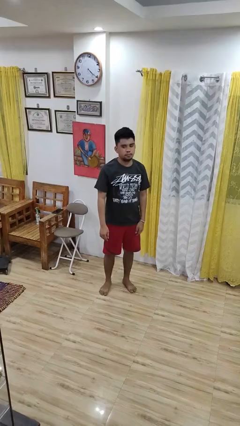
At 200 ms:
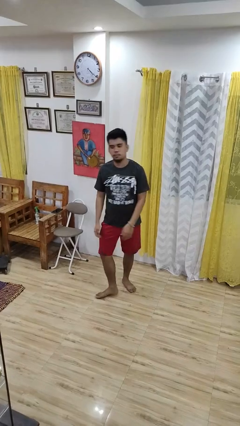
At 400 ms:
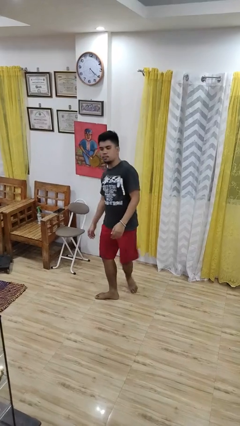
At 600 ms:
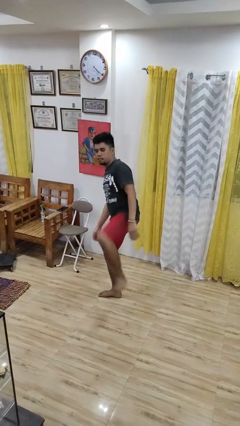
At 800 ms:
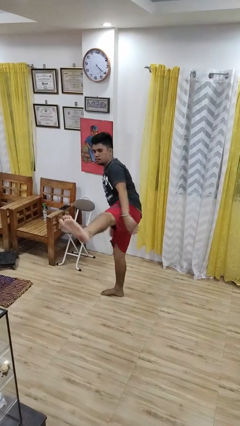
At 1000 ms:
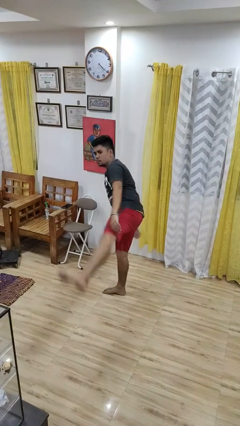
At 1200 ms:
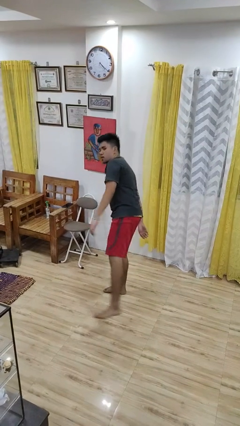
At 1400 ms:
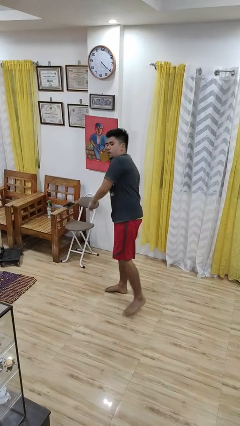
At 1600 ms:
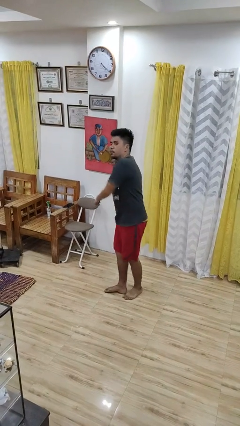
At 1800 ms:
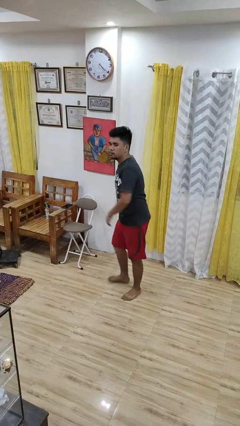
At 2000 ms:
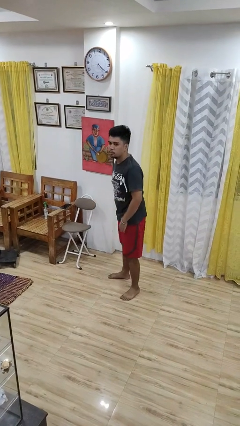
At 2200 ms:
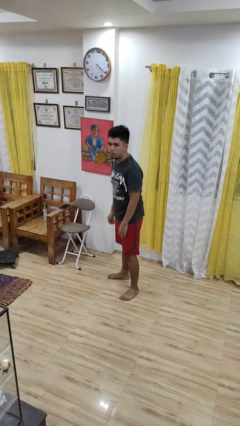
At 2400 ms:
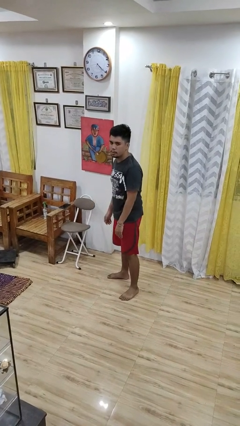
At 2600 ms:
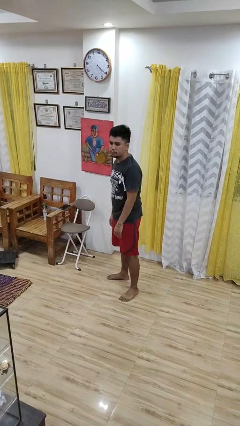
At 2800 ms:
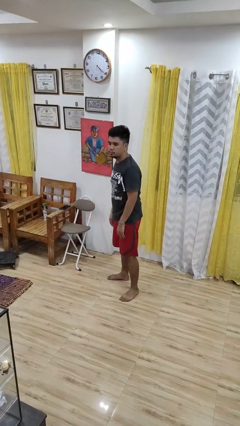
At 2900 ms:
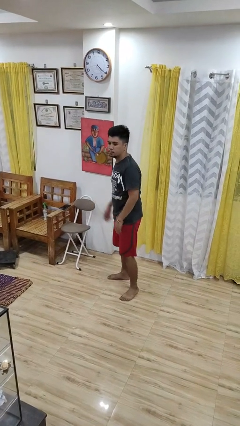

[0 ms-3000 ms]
person karate kicks

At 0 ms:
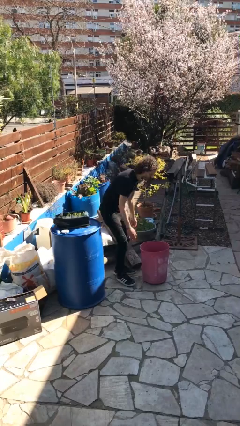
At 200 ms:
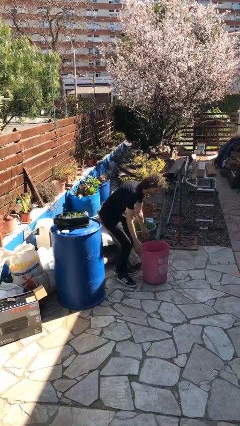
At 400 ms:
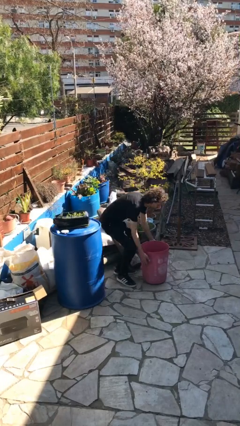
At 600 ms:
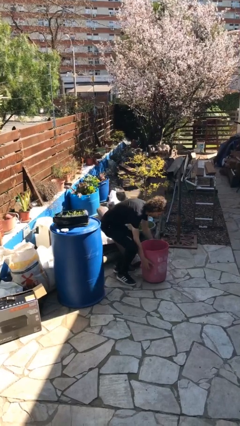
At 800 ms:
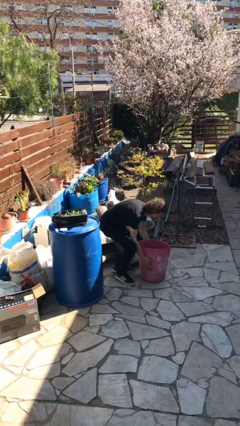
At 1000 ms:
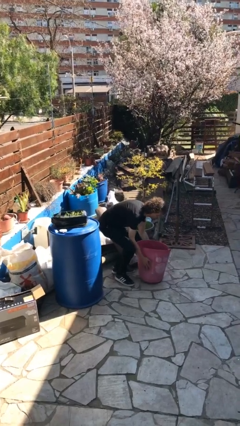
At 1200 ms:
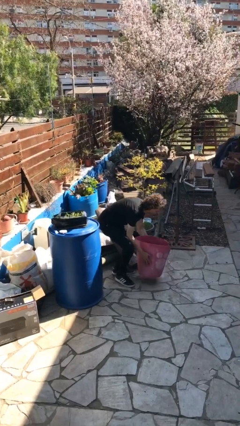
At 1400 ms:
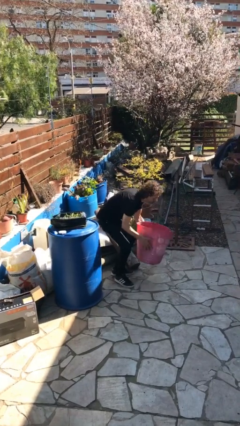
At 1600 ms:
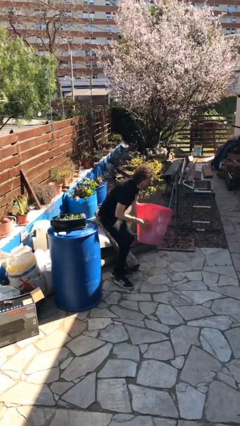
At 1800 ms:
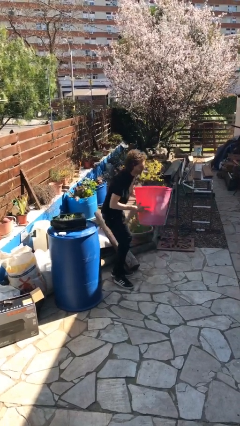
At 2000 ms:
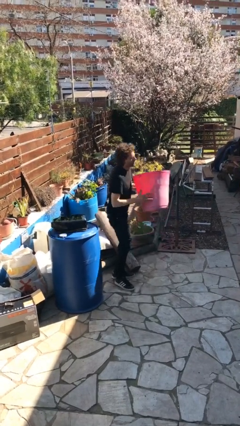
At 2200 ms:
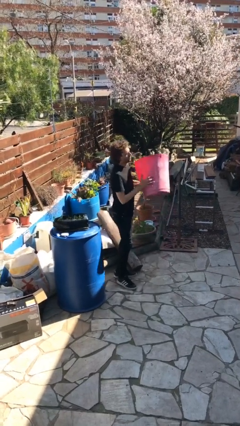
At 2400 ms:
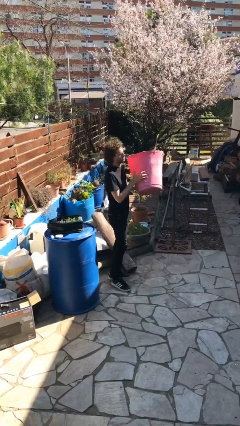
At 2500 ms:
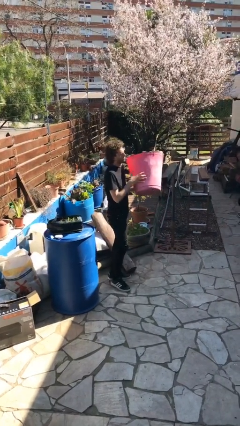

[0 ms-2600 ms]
person picks up object from floor

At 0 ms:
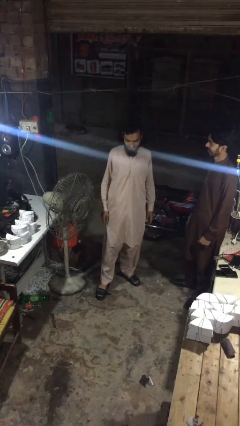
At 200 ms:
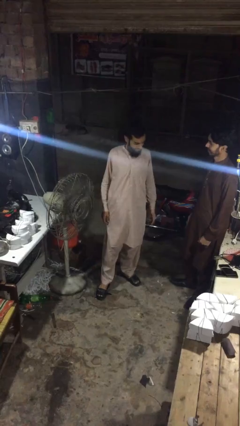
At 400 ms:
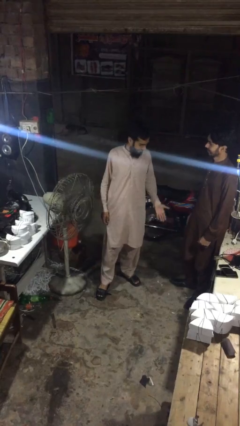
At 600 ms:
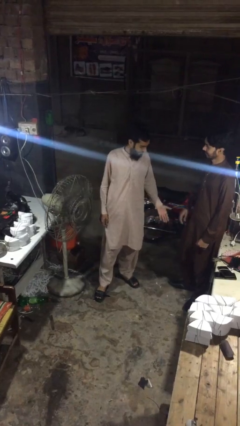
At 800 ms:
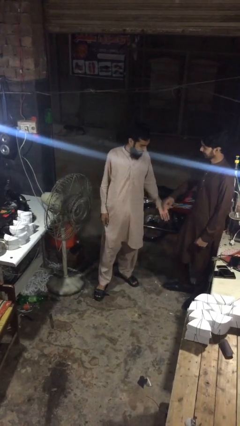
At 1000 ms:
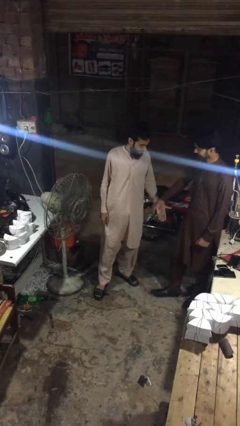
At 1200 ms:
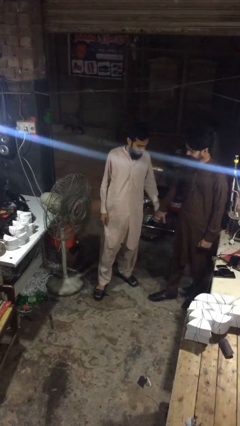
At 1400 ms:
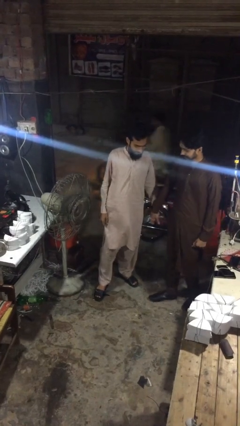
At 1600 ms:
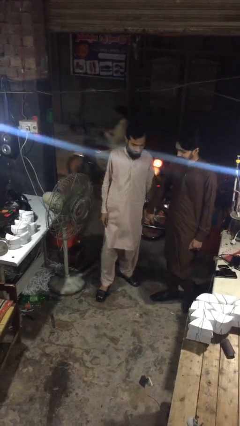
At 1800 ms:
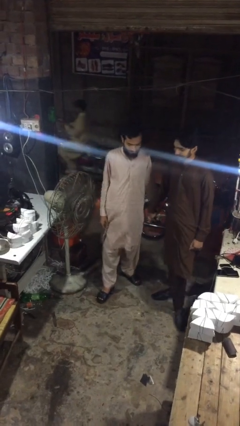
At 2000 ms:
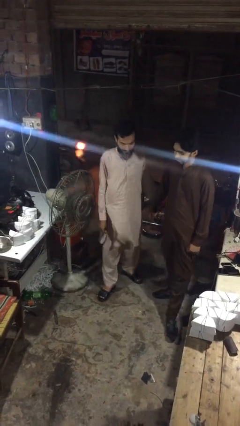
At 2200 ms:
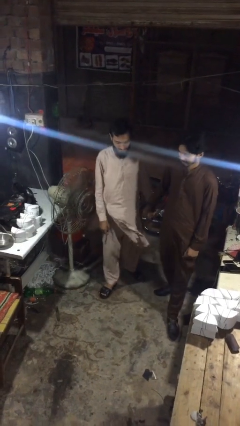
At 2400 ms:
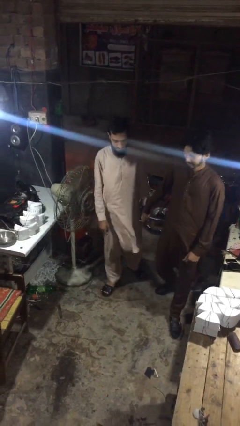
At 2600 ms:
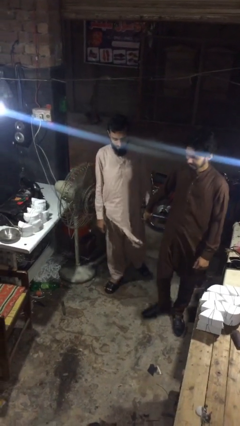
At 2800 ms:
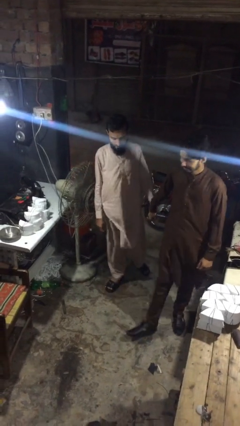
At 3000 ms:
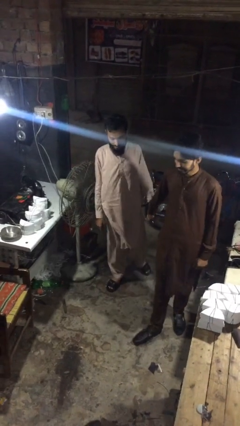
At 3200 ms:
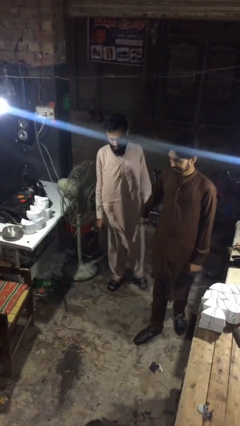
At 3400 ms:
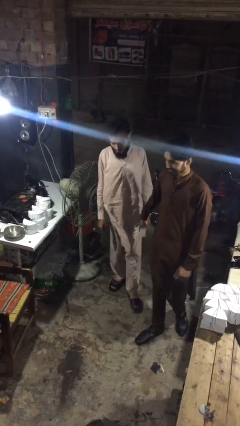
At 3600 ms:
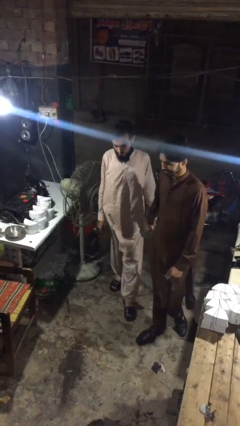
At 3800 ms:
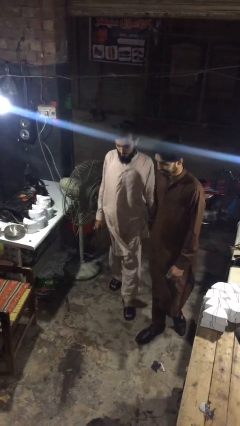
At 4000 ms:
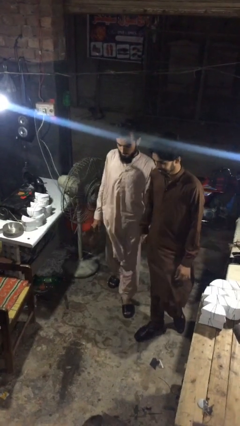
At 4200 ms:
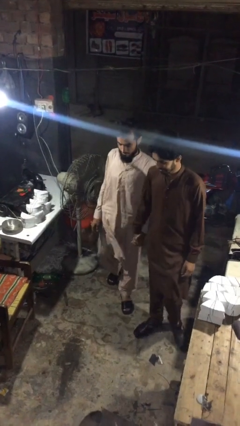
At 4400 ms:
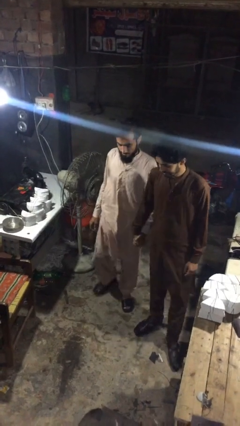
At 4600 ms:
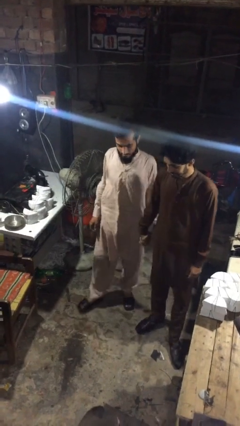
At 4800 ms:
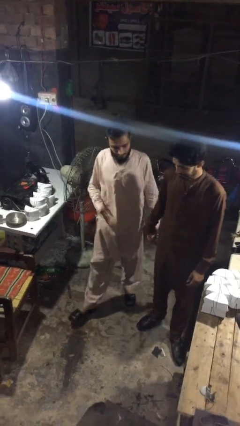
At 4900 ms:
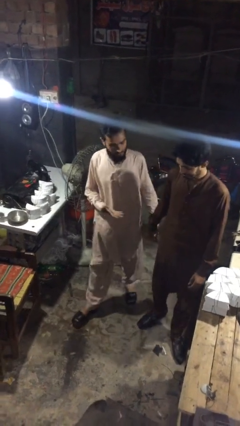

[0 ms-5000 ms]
person holds hand

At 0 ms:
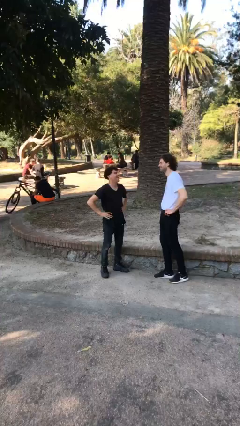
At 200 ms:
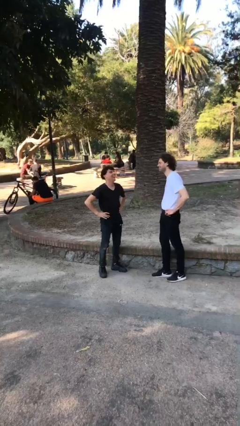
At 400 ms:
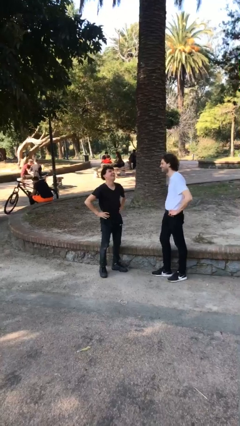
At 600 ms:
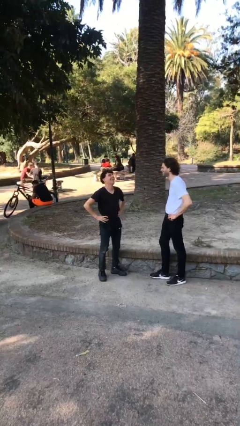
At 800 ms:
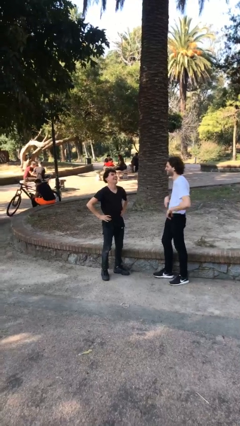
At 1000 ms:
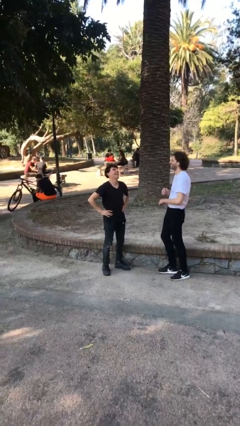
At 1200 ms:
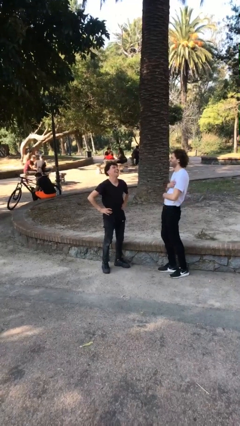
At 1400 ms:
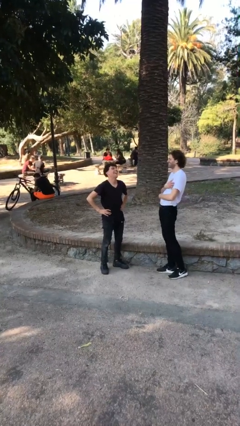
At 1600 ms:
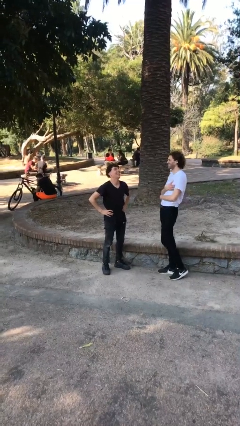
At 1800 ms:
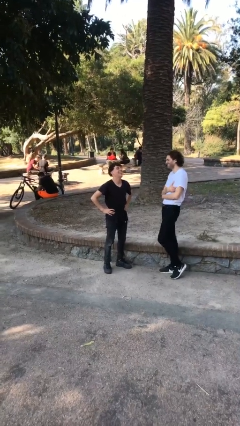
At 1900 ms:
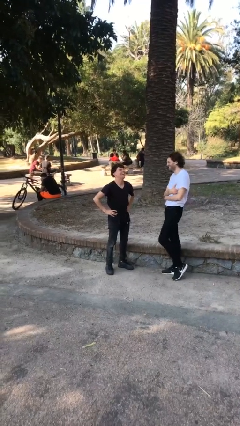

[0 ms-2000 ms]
person laughs with person

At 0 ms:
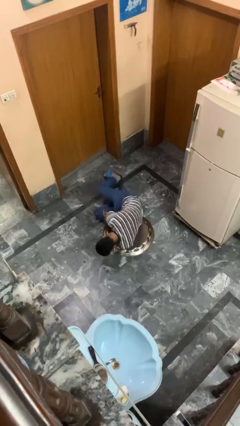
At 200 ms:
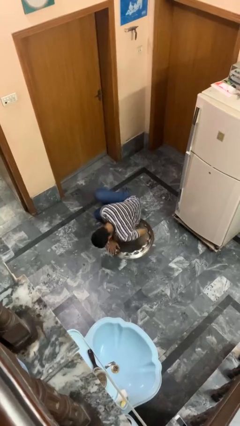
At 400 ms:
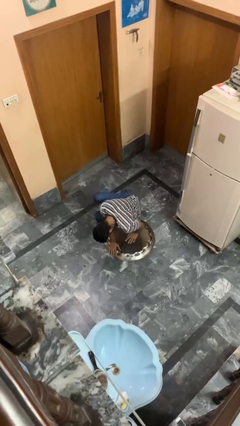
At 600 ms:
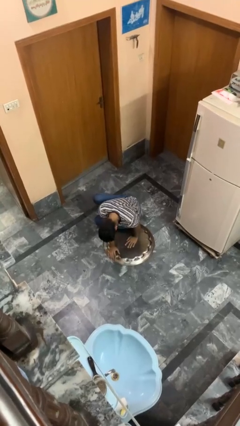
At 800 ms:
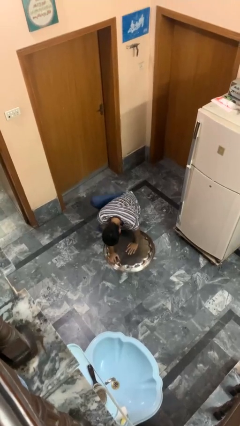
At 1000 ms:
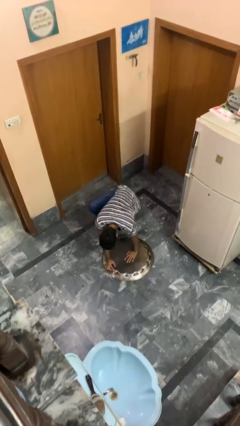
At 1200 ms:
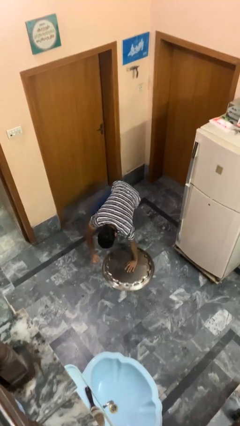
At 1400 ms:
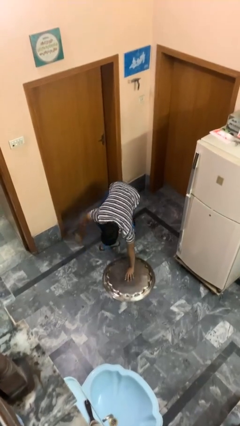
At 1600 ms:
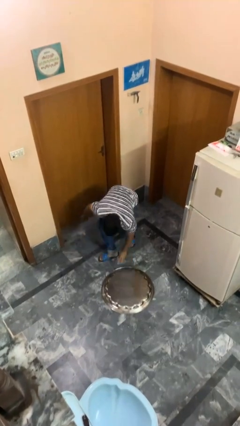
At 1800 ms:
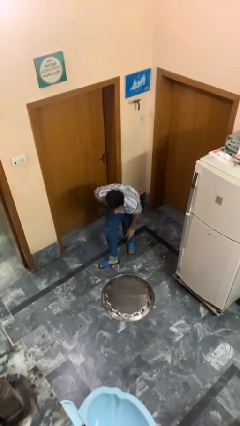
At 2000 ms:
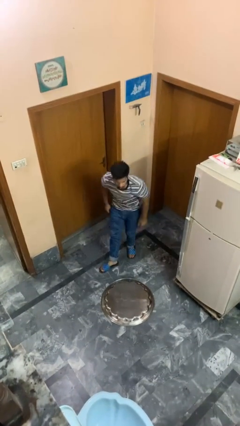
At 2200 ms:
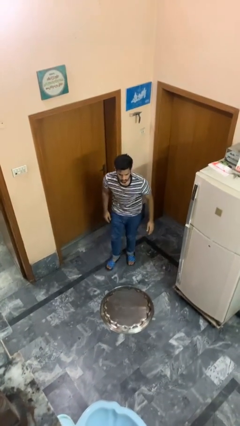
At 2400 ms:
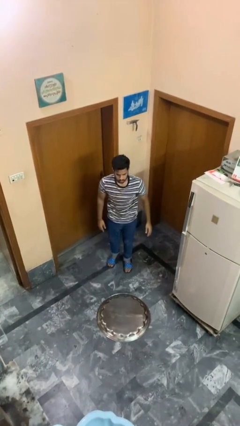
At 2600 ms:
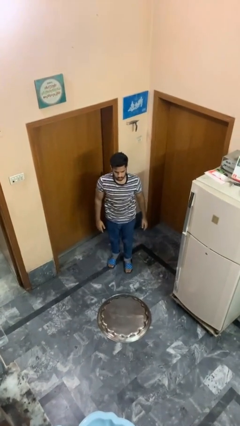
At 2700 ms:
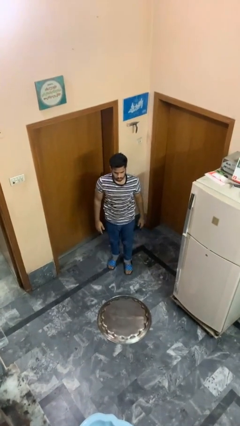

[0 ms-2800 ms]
person stands up from floor

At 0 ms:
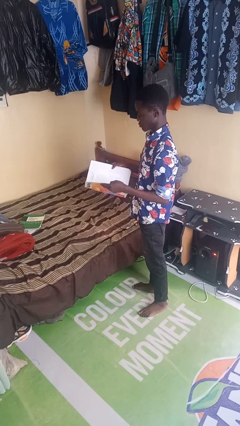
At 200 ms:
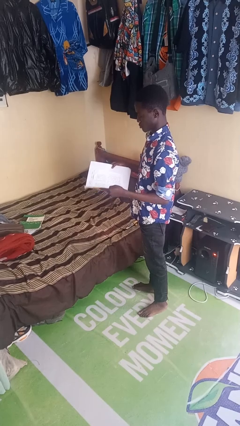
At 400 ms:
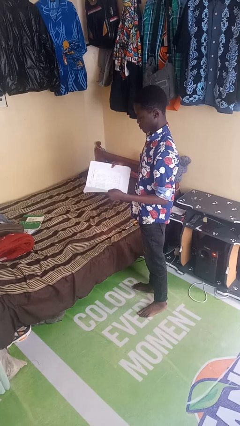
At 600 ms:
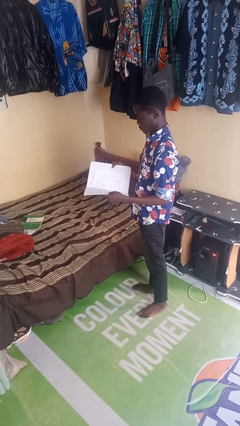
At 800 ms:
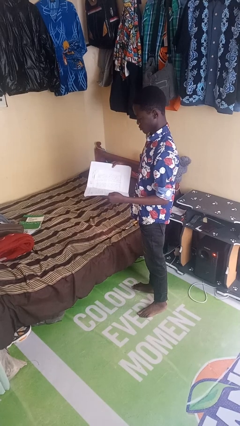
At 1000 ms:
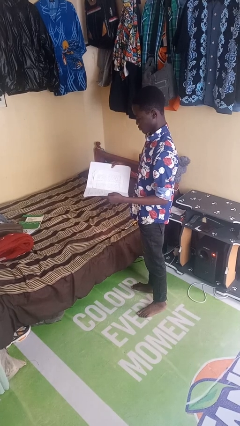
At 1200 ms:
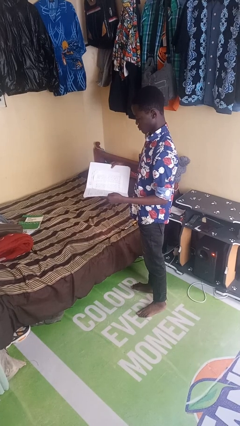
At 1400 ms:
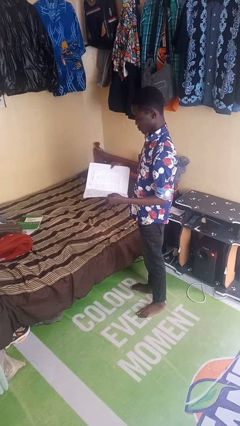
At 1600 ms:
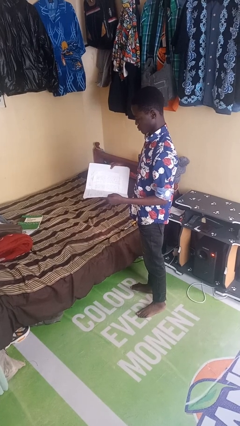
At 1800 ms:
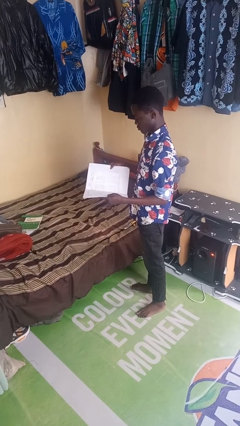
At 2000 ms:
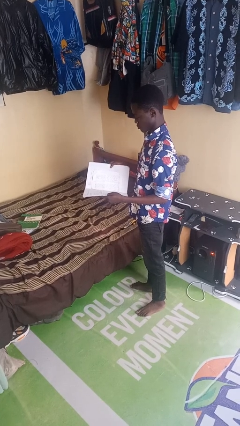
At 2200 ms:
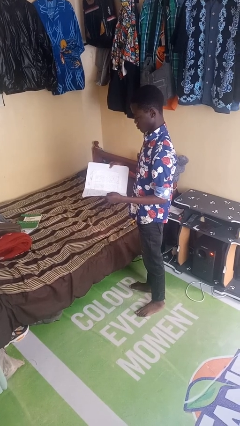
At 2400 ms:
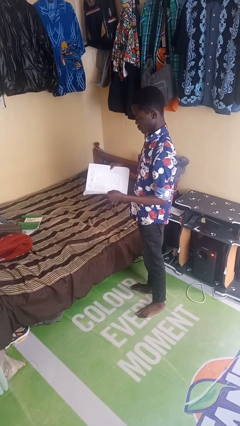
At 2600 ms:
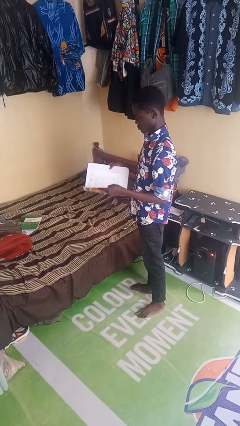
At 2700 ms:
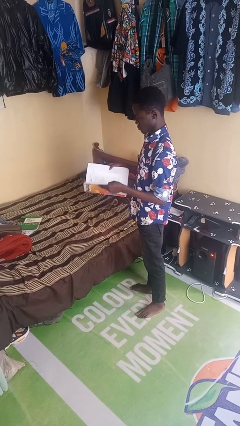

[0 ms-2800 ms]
person reads book
